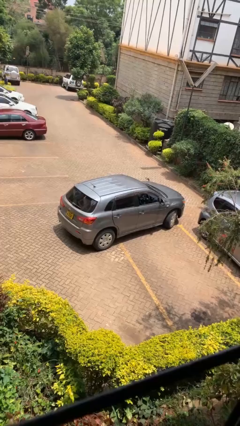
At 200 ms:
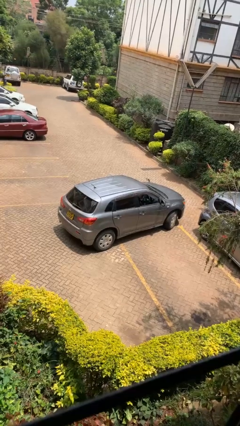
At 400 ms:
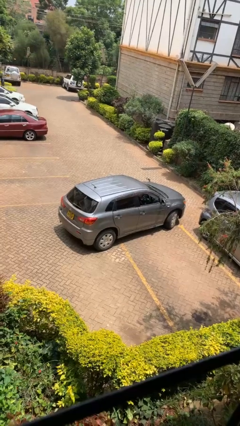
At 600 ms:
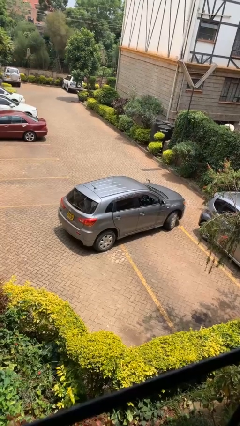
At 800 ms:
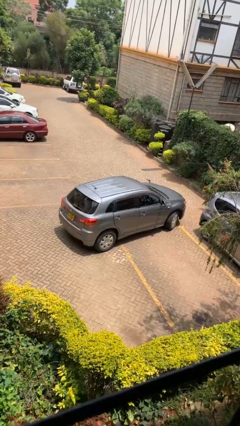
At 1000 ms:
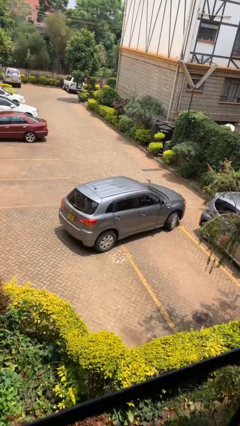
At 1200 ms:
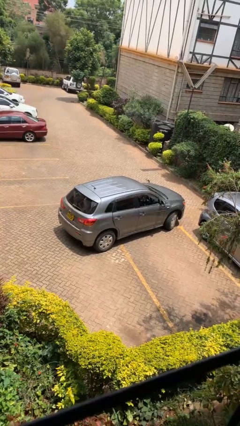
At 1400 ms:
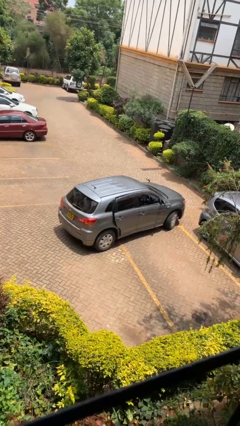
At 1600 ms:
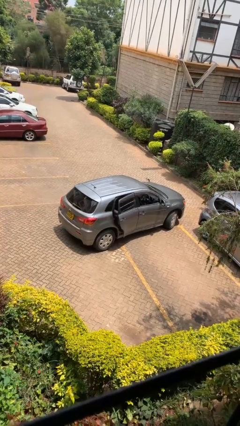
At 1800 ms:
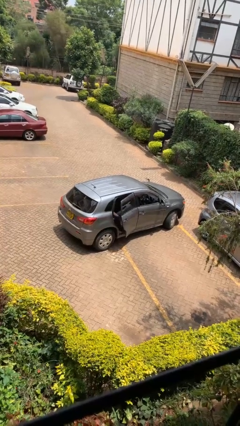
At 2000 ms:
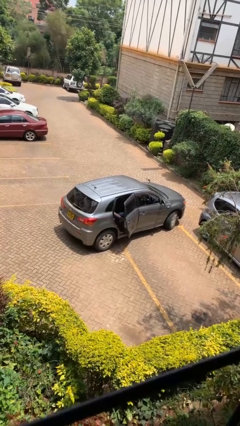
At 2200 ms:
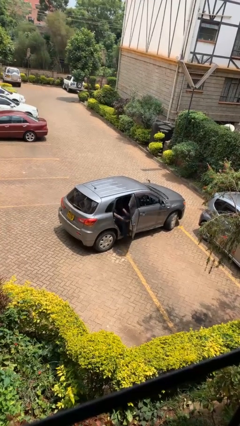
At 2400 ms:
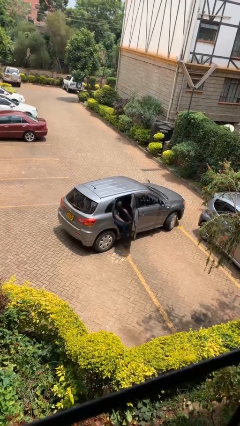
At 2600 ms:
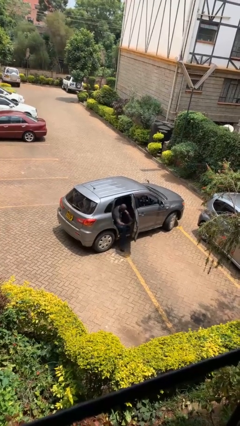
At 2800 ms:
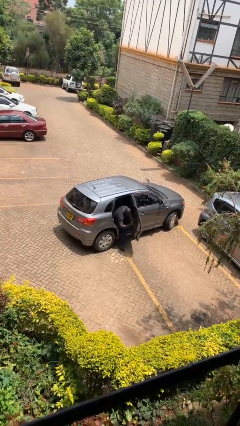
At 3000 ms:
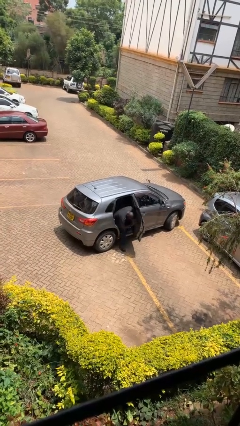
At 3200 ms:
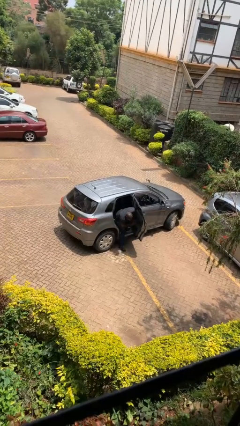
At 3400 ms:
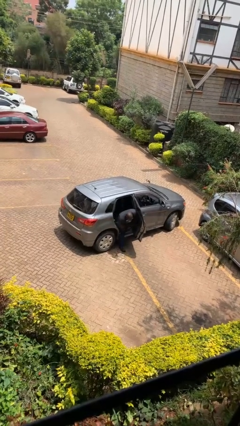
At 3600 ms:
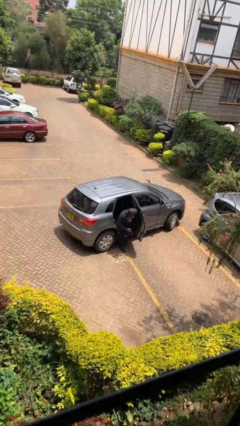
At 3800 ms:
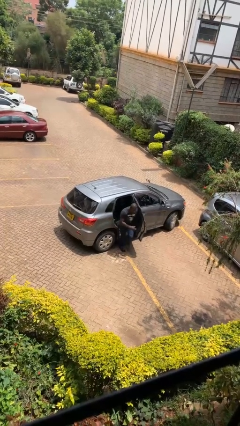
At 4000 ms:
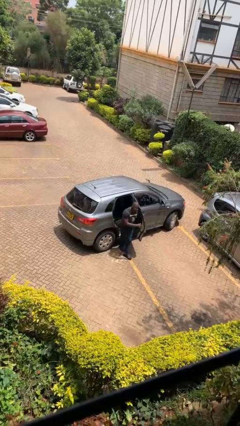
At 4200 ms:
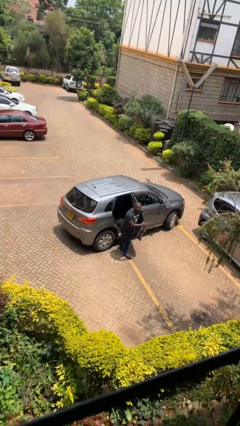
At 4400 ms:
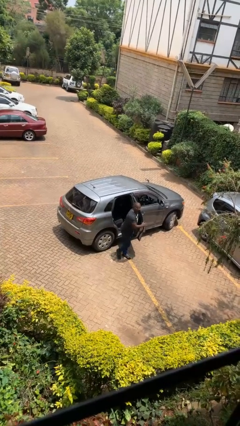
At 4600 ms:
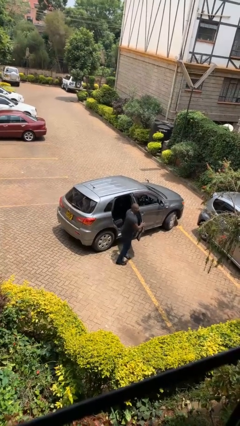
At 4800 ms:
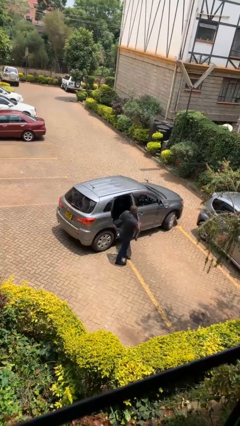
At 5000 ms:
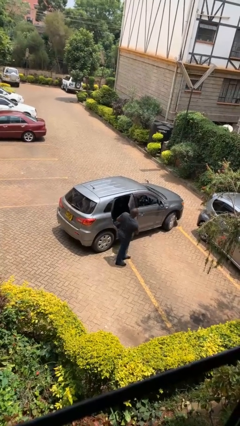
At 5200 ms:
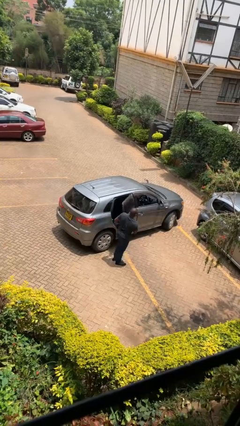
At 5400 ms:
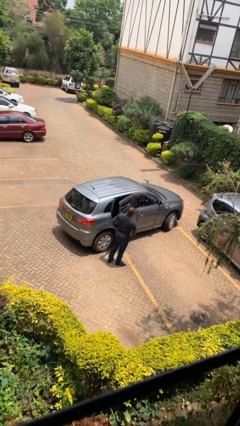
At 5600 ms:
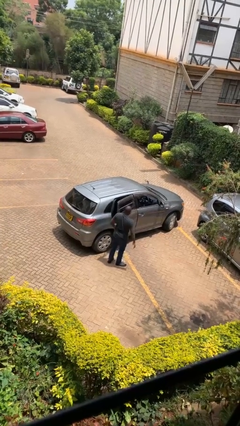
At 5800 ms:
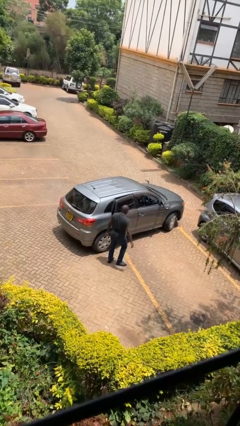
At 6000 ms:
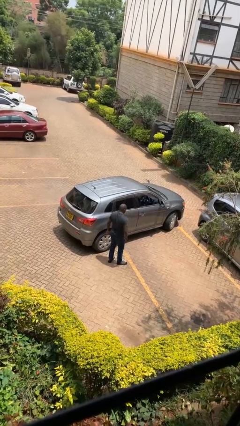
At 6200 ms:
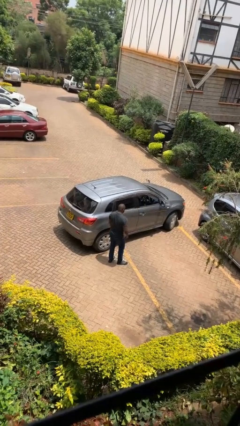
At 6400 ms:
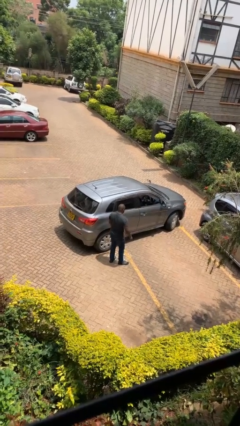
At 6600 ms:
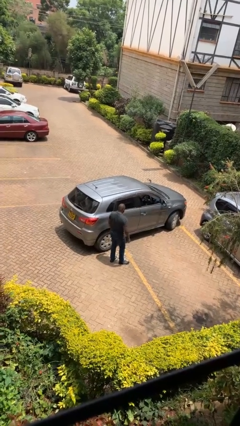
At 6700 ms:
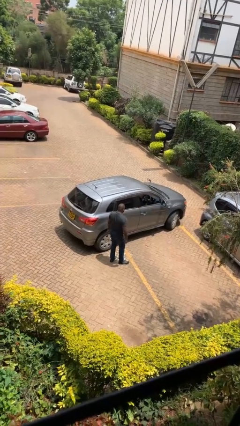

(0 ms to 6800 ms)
car drops off person

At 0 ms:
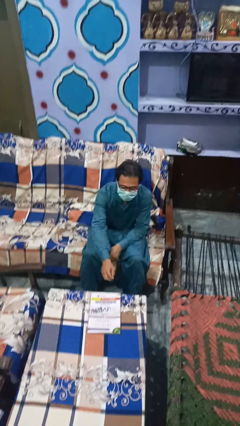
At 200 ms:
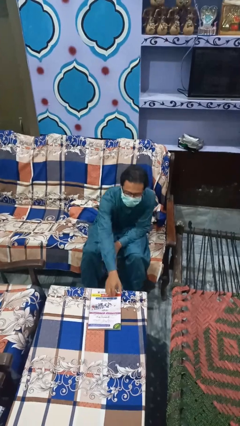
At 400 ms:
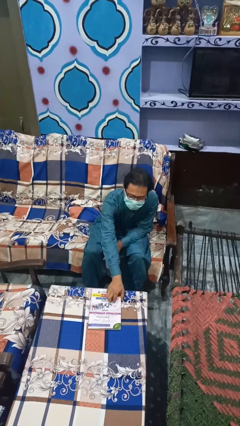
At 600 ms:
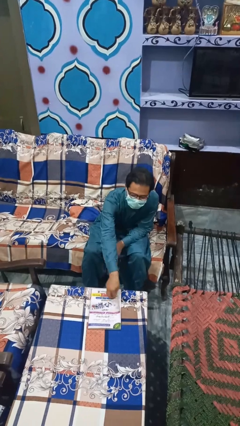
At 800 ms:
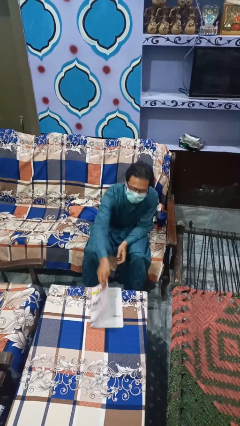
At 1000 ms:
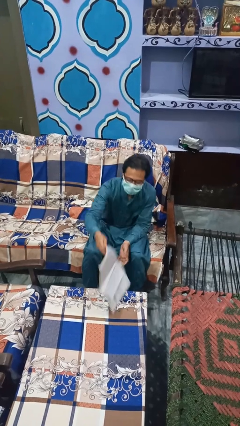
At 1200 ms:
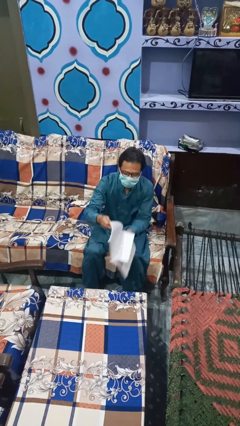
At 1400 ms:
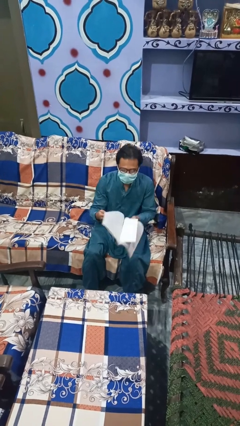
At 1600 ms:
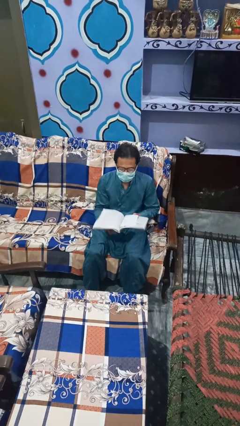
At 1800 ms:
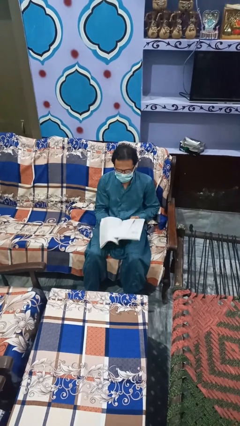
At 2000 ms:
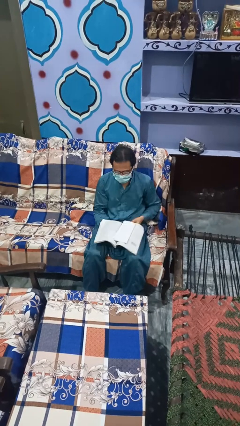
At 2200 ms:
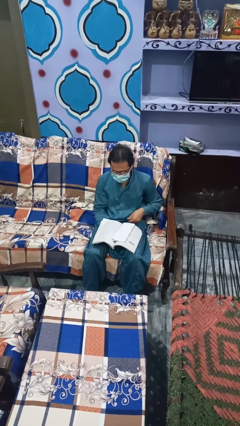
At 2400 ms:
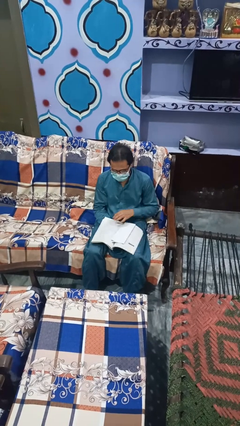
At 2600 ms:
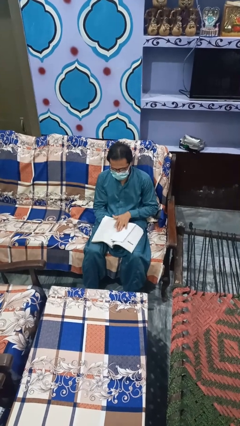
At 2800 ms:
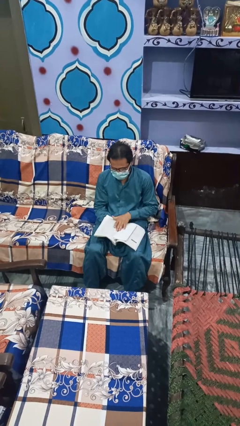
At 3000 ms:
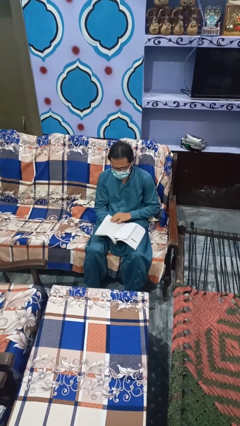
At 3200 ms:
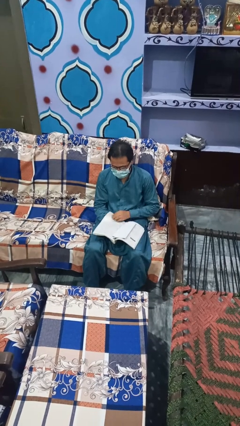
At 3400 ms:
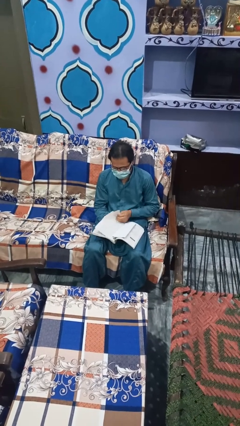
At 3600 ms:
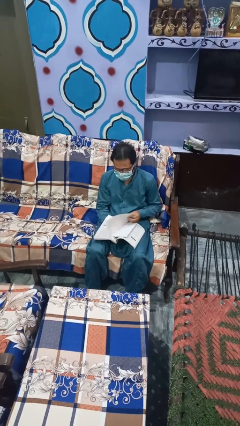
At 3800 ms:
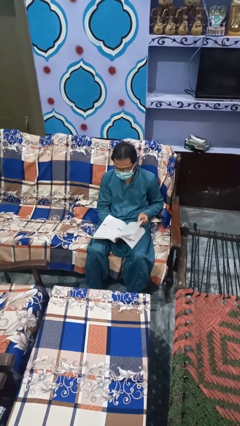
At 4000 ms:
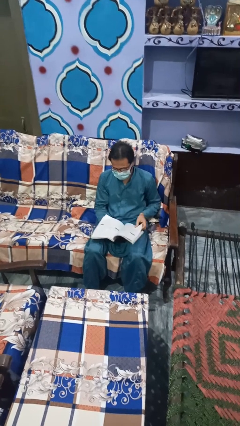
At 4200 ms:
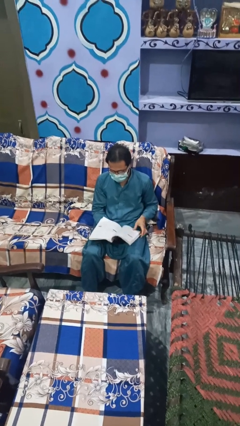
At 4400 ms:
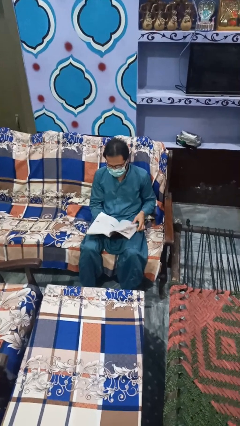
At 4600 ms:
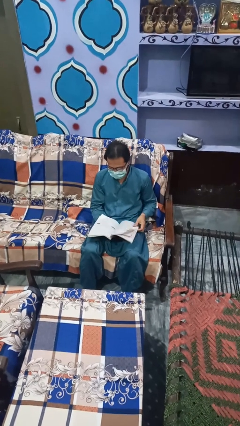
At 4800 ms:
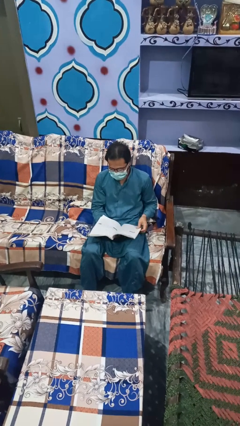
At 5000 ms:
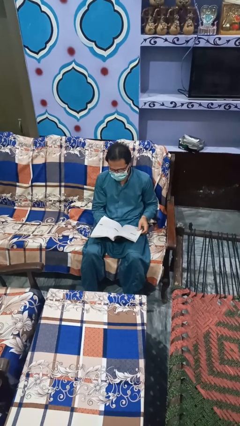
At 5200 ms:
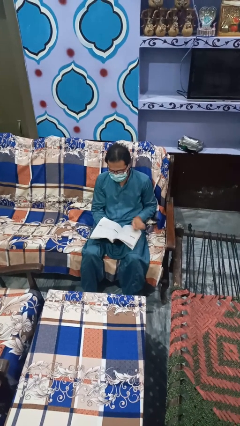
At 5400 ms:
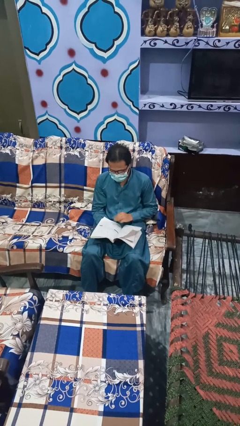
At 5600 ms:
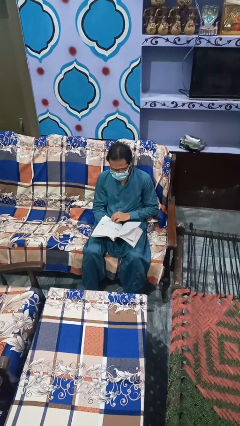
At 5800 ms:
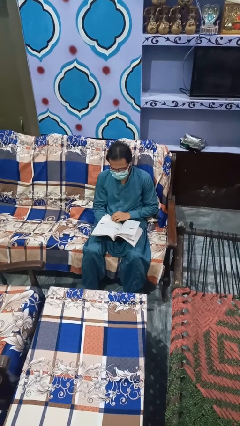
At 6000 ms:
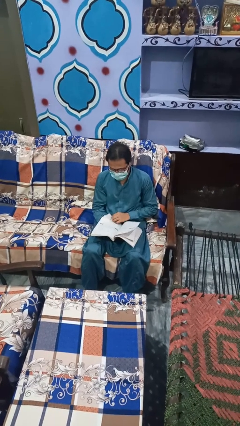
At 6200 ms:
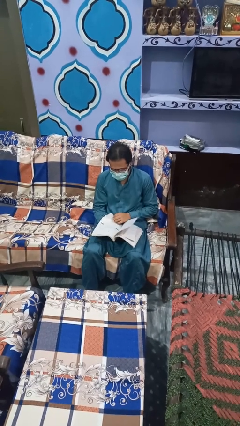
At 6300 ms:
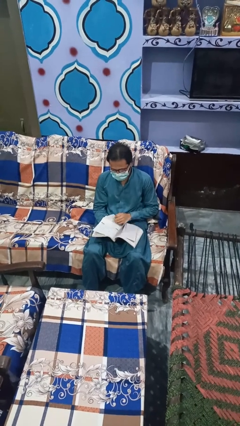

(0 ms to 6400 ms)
person reads magazine

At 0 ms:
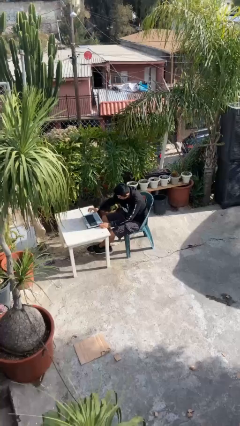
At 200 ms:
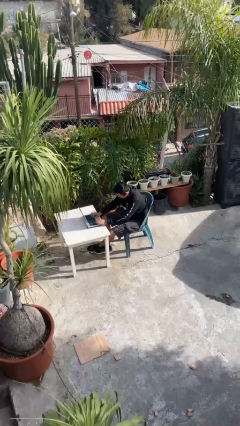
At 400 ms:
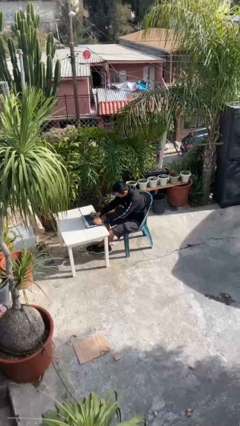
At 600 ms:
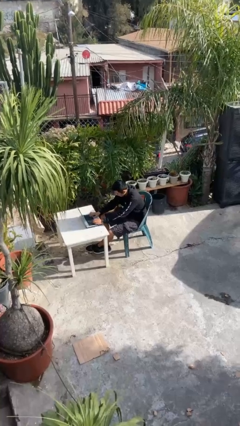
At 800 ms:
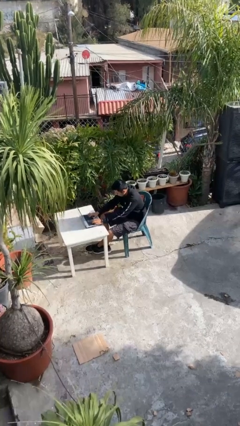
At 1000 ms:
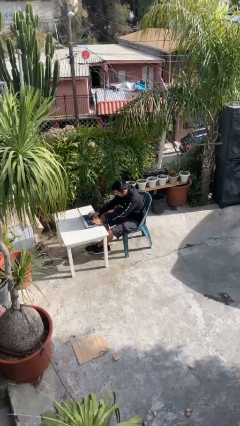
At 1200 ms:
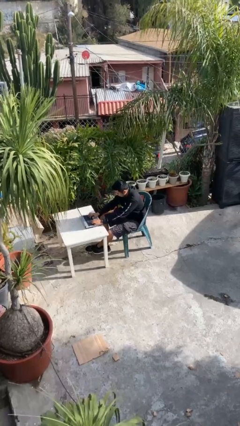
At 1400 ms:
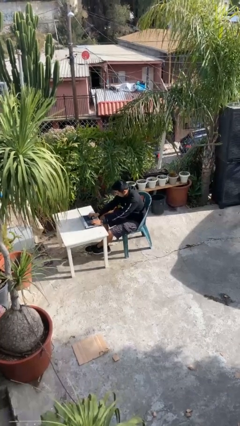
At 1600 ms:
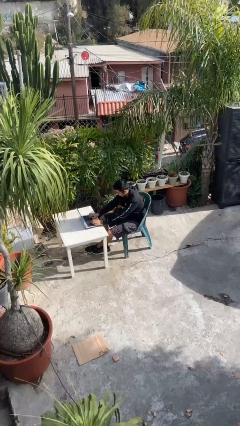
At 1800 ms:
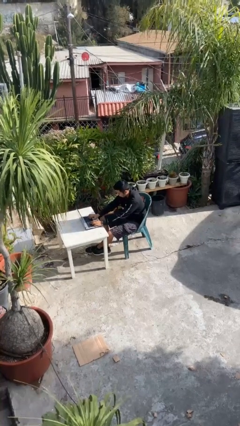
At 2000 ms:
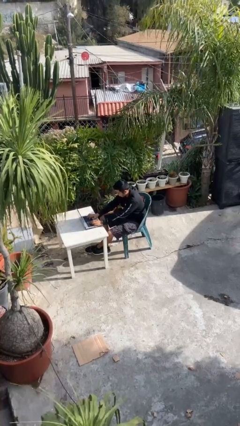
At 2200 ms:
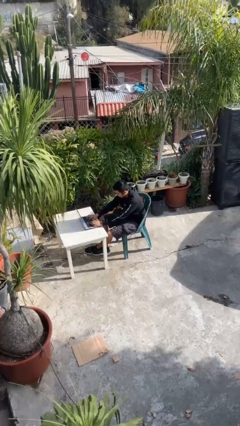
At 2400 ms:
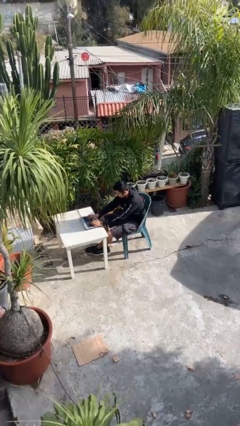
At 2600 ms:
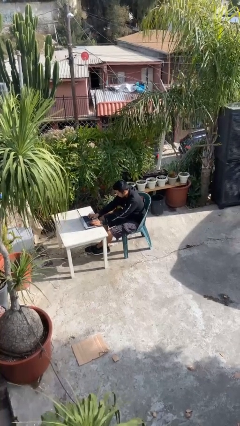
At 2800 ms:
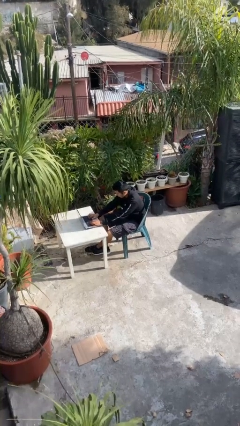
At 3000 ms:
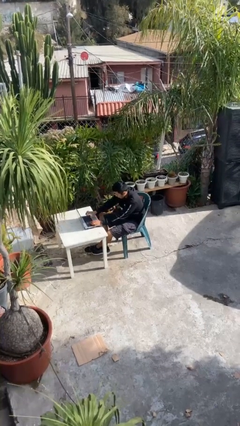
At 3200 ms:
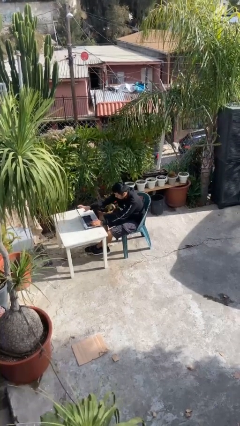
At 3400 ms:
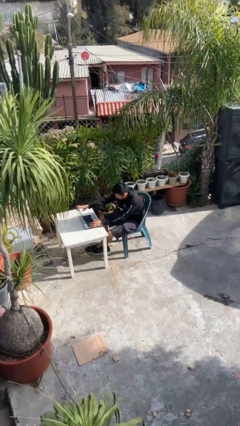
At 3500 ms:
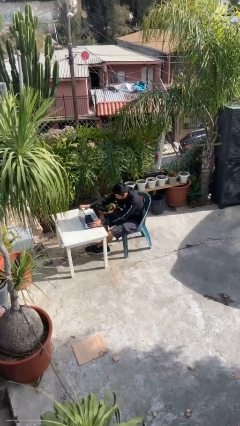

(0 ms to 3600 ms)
person interacts with laptop

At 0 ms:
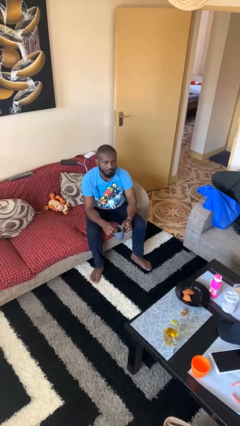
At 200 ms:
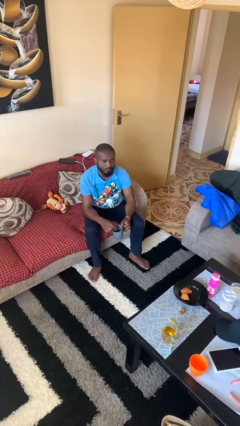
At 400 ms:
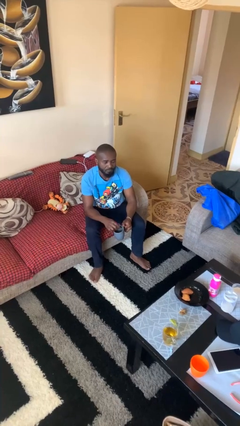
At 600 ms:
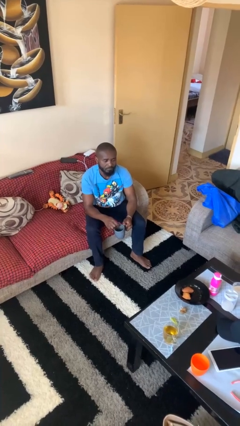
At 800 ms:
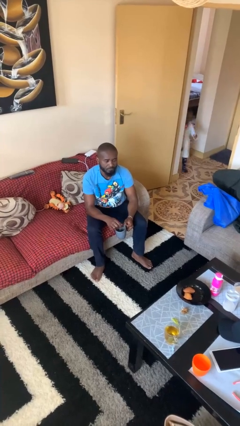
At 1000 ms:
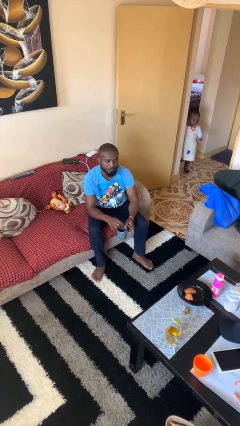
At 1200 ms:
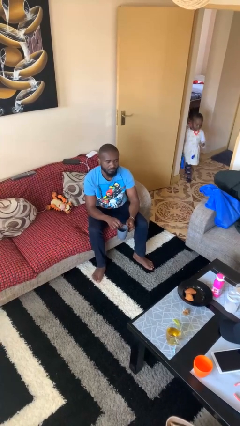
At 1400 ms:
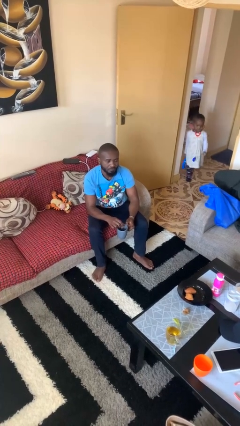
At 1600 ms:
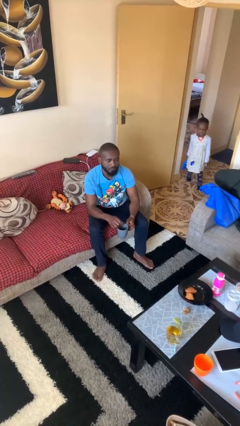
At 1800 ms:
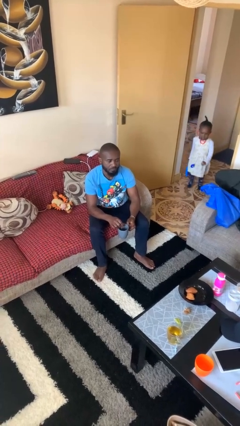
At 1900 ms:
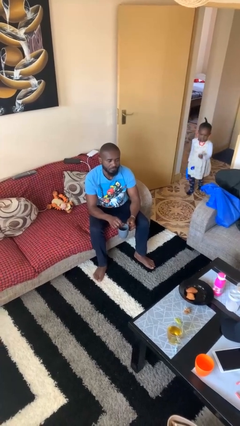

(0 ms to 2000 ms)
person stirs mug
